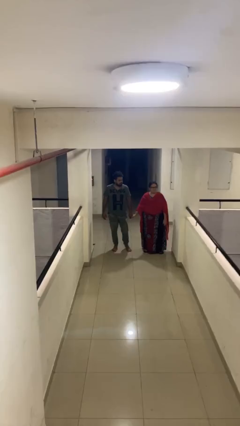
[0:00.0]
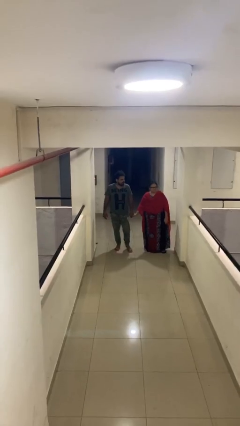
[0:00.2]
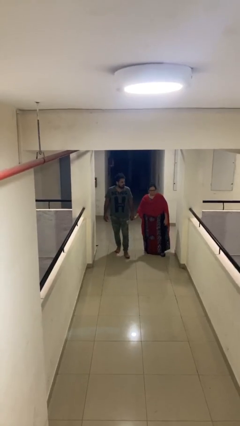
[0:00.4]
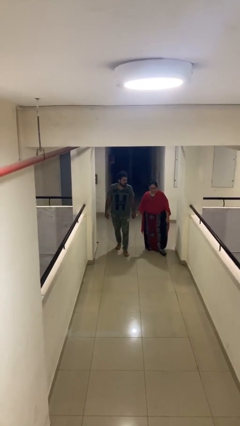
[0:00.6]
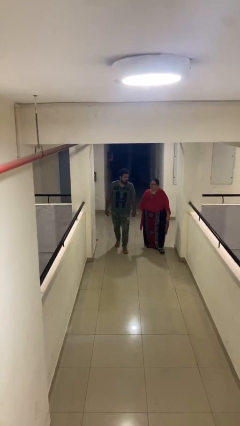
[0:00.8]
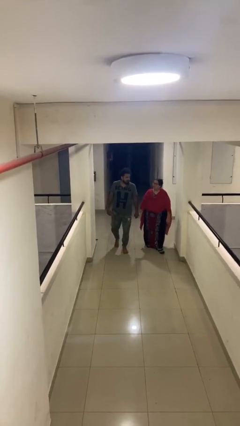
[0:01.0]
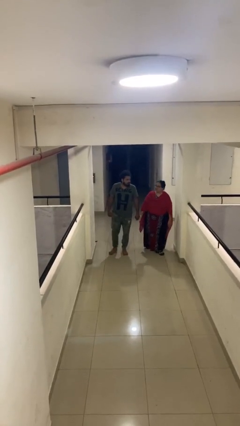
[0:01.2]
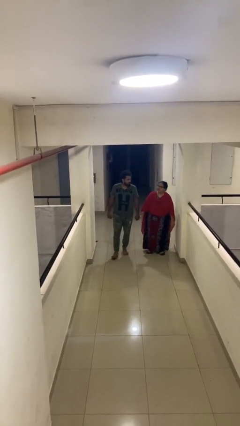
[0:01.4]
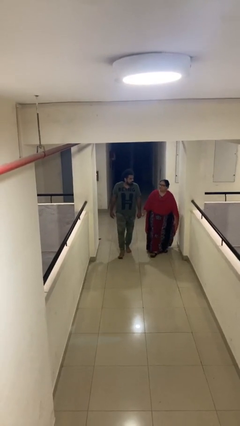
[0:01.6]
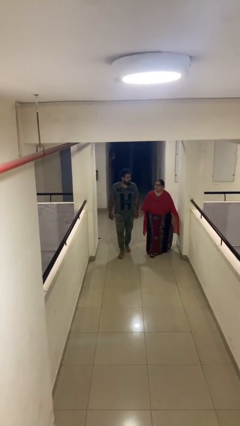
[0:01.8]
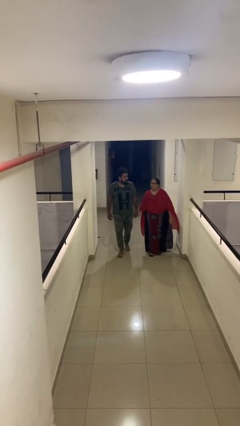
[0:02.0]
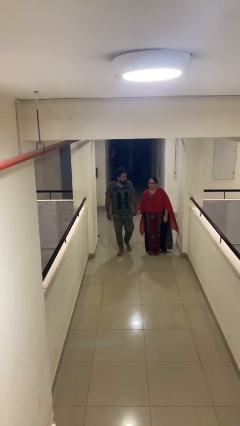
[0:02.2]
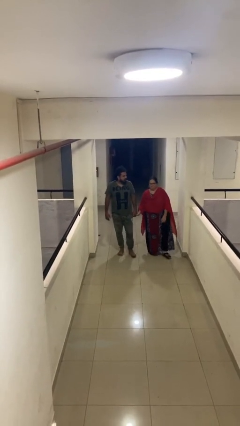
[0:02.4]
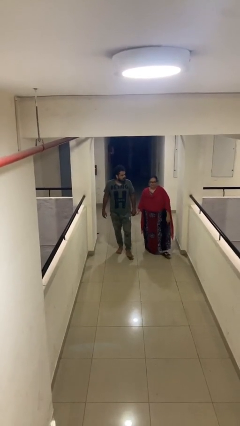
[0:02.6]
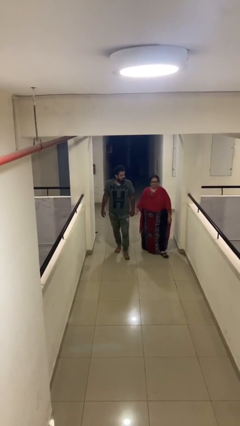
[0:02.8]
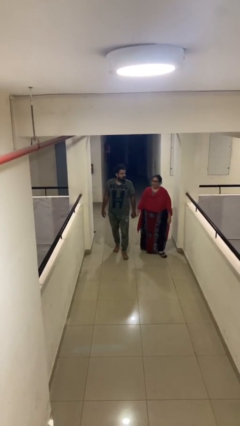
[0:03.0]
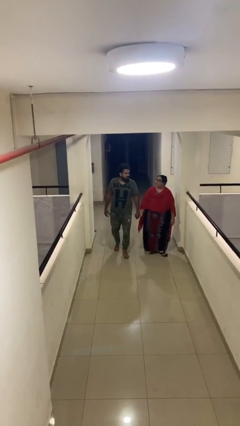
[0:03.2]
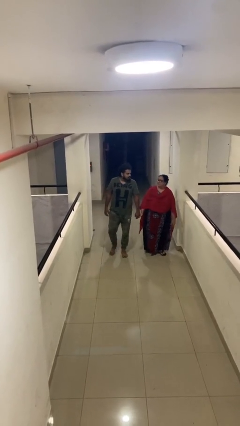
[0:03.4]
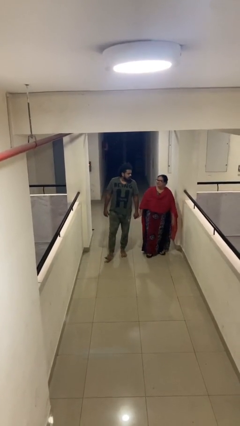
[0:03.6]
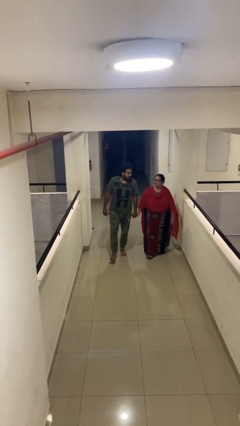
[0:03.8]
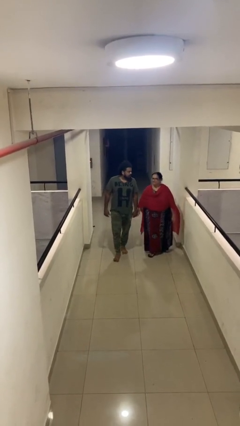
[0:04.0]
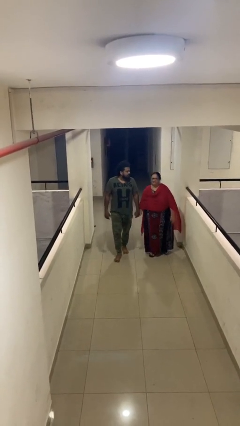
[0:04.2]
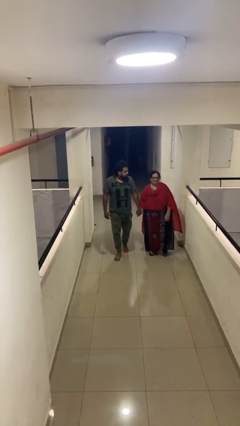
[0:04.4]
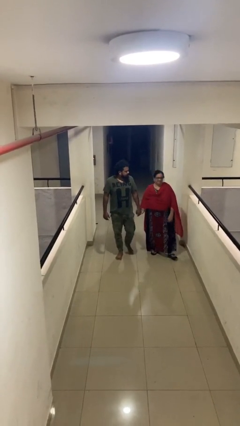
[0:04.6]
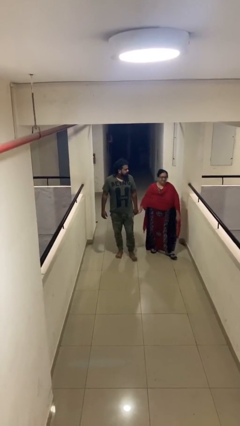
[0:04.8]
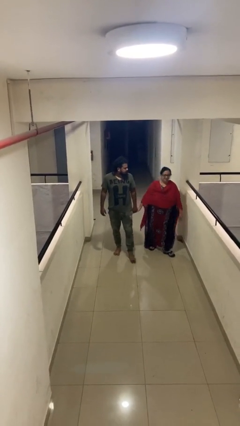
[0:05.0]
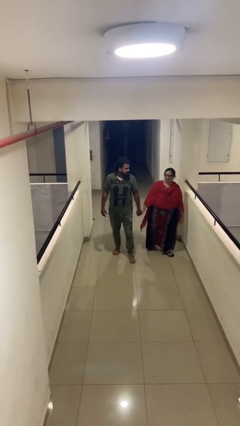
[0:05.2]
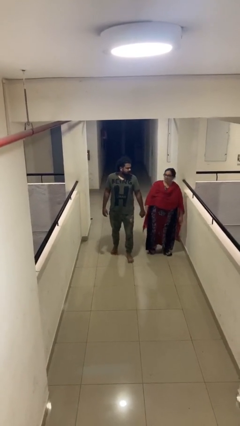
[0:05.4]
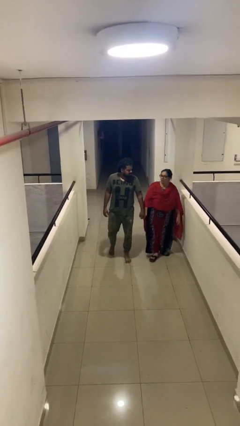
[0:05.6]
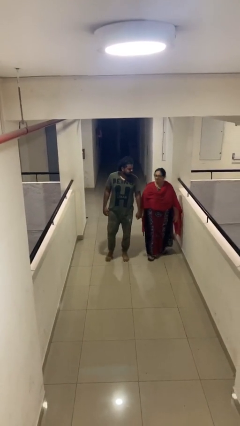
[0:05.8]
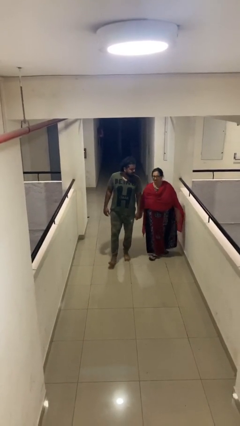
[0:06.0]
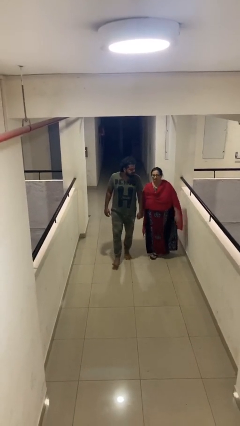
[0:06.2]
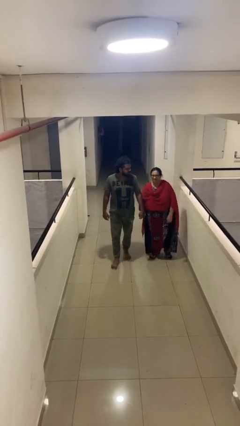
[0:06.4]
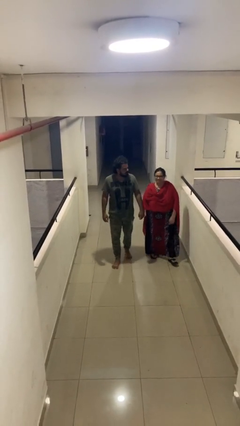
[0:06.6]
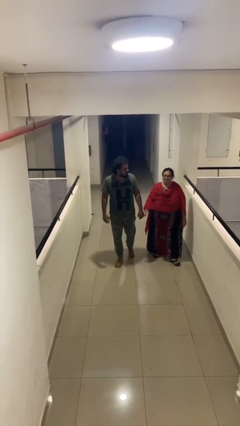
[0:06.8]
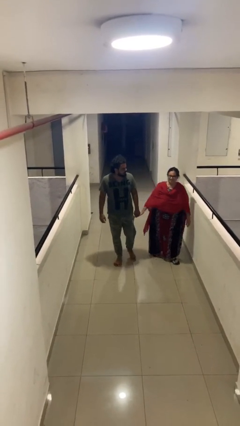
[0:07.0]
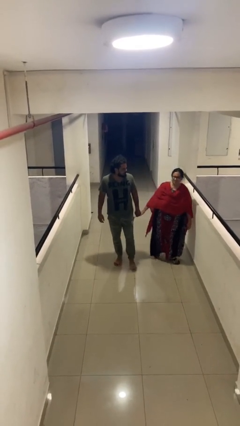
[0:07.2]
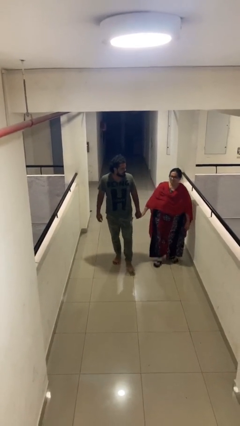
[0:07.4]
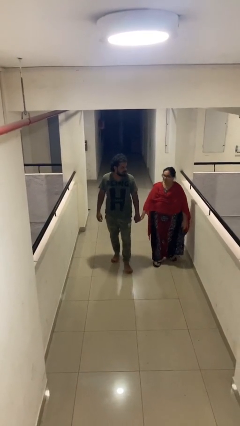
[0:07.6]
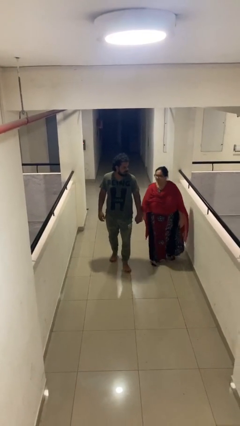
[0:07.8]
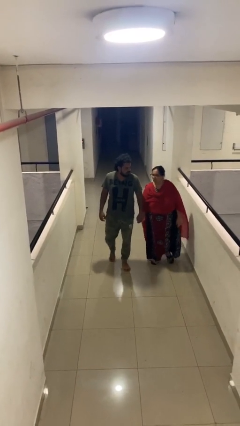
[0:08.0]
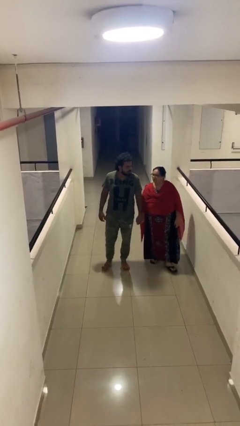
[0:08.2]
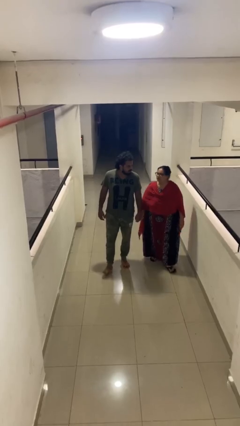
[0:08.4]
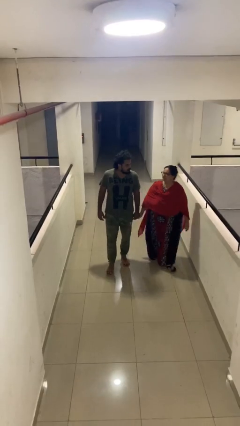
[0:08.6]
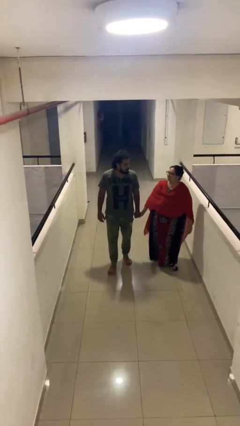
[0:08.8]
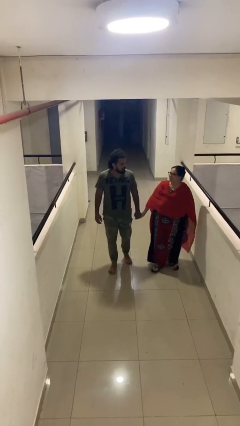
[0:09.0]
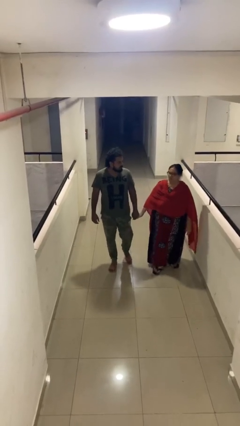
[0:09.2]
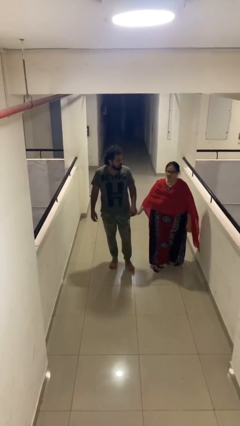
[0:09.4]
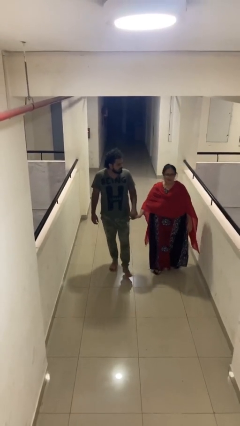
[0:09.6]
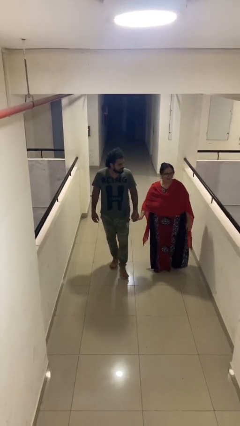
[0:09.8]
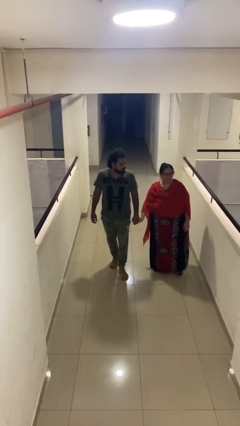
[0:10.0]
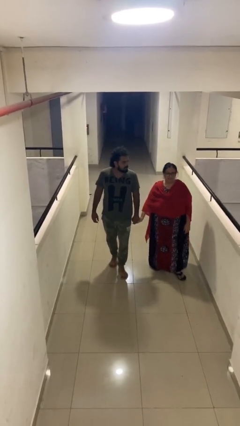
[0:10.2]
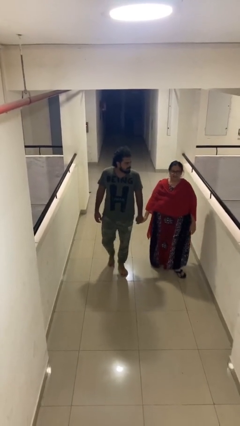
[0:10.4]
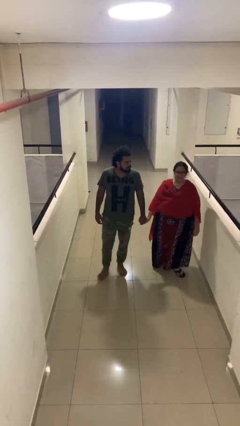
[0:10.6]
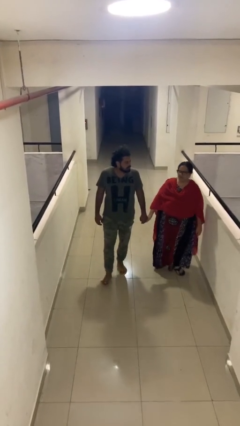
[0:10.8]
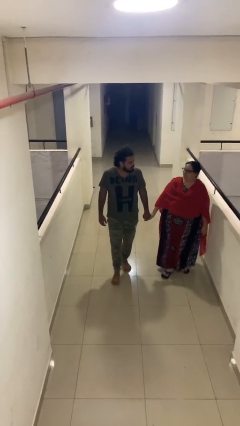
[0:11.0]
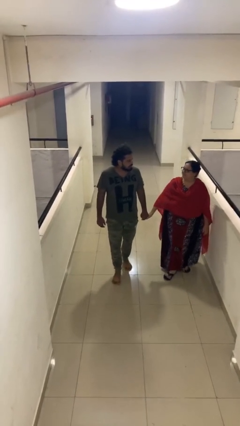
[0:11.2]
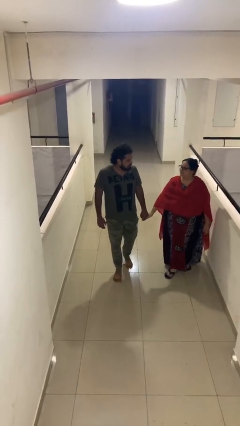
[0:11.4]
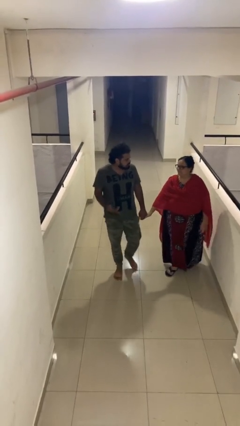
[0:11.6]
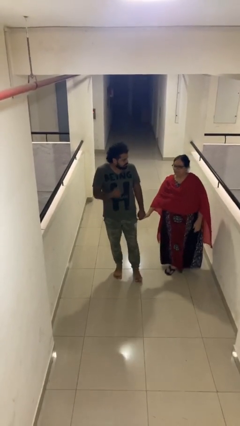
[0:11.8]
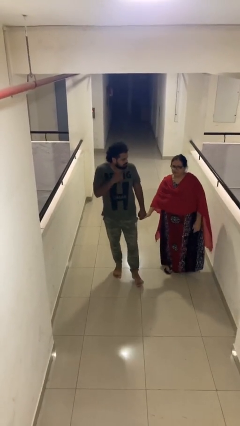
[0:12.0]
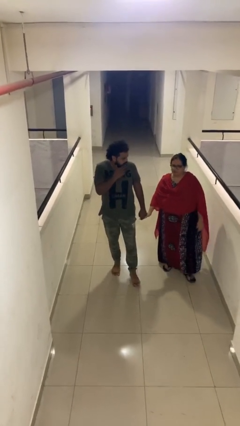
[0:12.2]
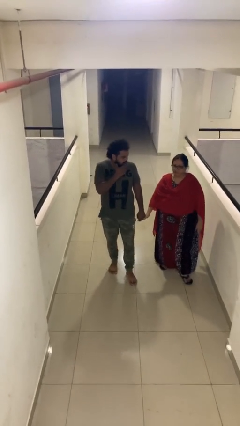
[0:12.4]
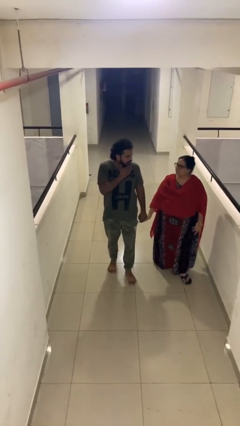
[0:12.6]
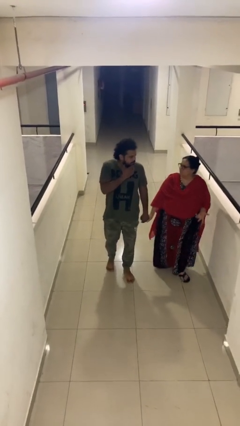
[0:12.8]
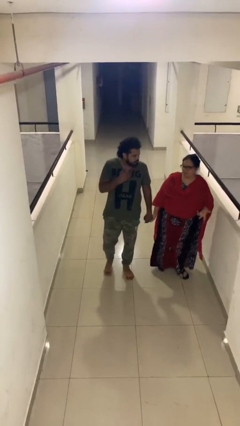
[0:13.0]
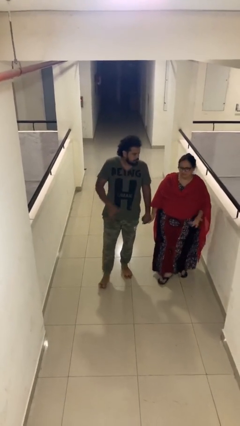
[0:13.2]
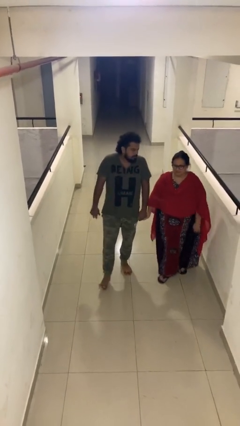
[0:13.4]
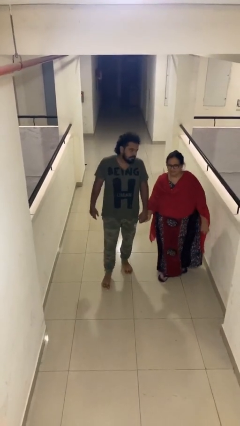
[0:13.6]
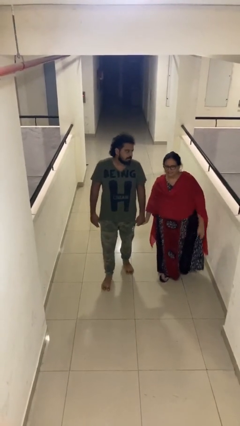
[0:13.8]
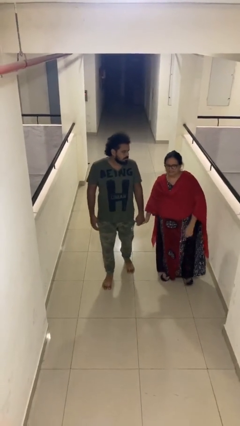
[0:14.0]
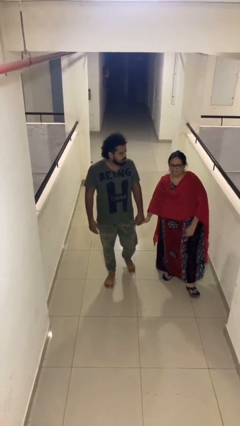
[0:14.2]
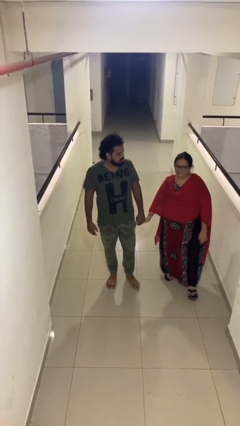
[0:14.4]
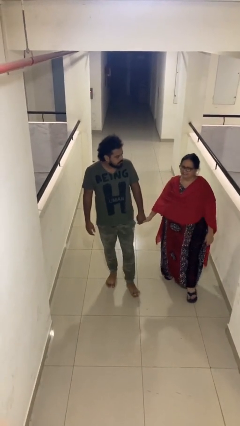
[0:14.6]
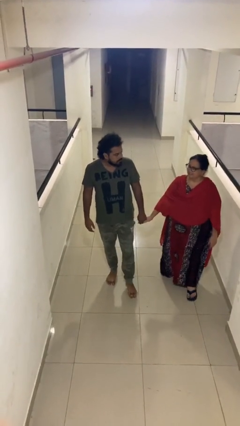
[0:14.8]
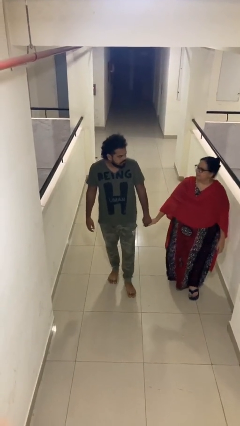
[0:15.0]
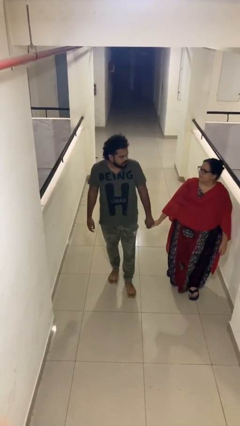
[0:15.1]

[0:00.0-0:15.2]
person holds hand

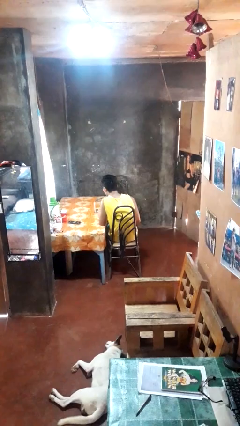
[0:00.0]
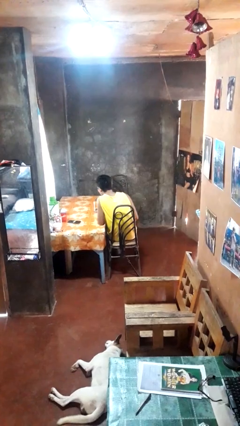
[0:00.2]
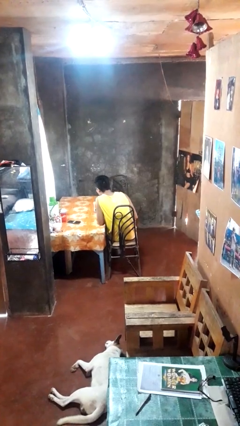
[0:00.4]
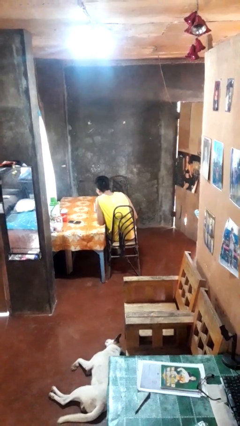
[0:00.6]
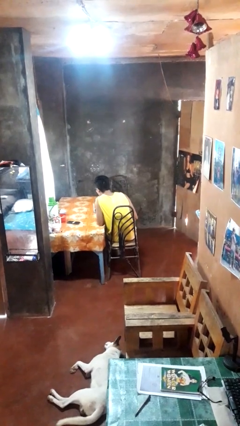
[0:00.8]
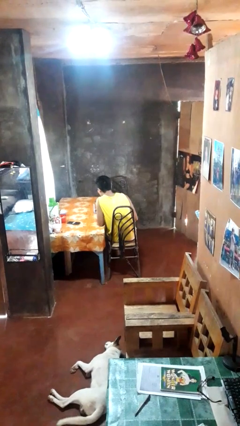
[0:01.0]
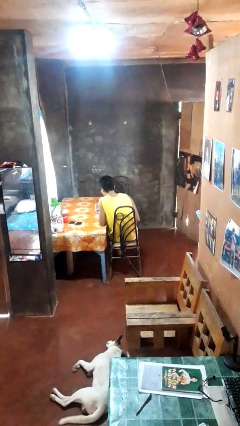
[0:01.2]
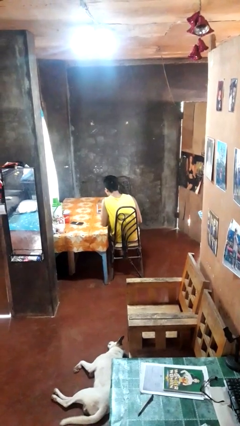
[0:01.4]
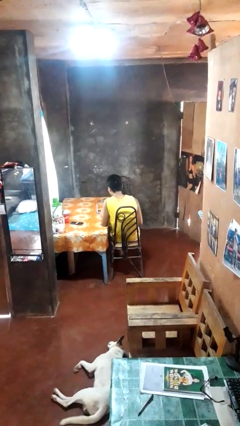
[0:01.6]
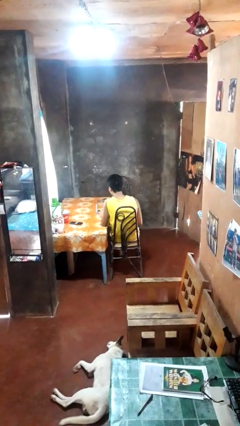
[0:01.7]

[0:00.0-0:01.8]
person extinguishes candle

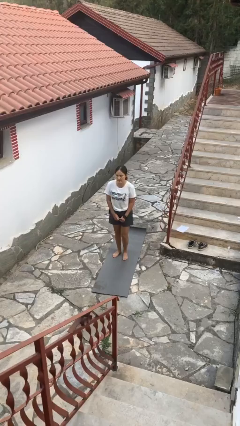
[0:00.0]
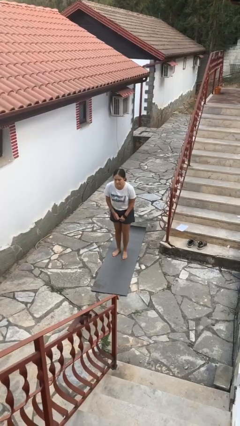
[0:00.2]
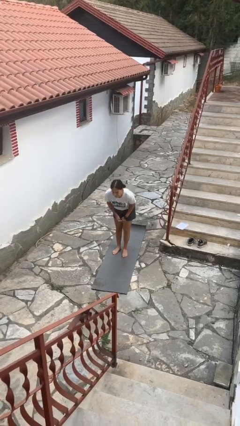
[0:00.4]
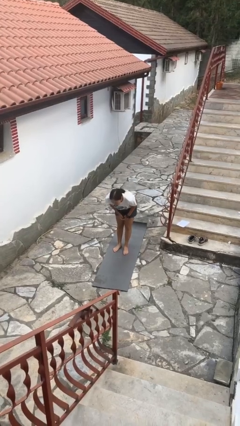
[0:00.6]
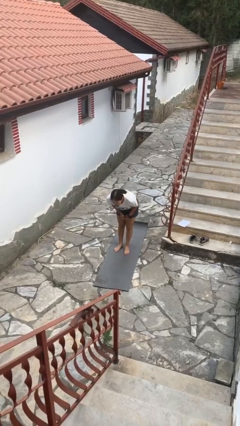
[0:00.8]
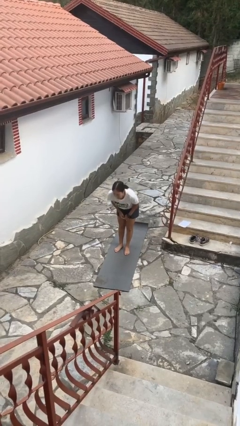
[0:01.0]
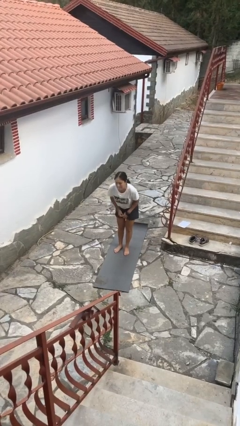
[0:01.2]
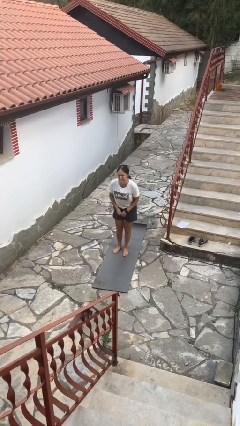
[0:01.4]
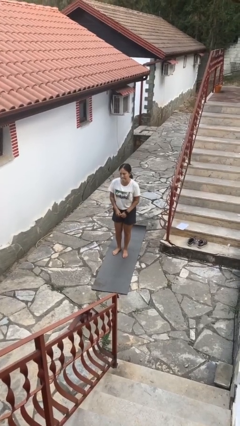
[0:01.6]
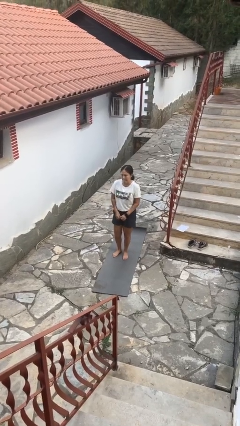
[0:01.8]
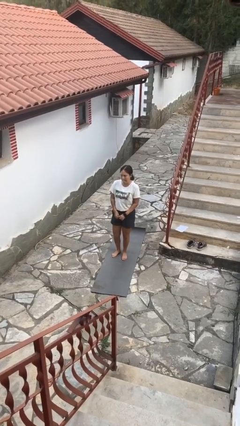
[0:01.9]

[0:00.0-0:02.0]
person bows
